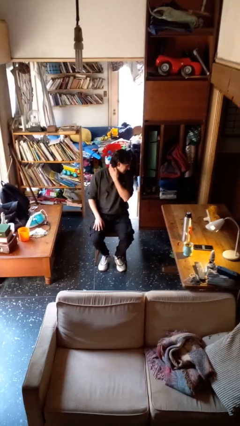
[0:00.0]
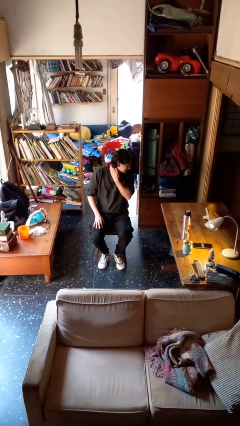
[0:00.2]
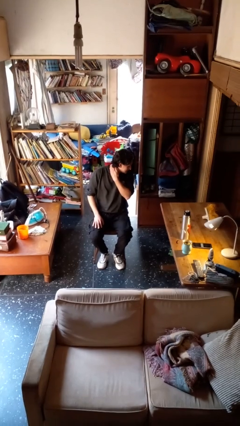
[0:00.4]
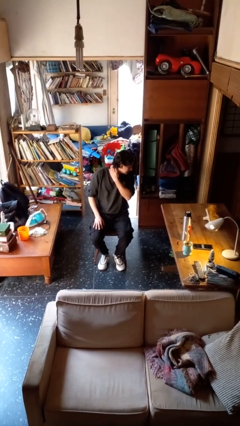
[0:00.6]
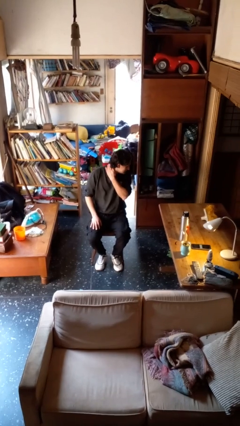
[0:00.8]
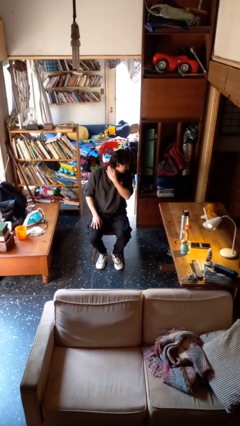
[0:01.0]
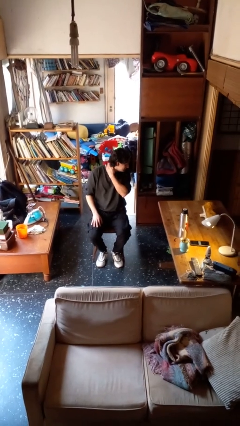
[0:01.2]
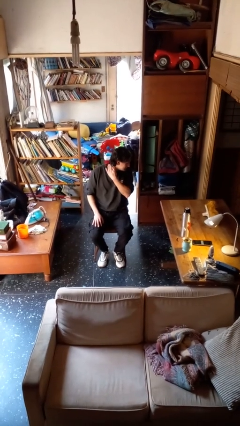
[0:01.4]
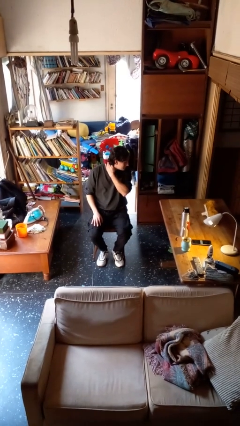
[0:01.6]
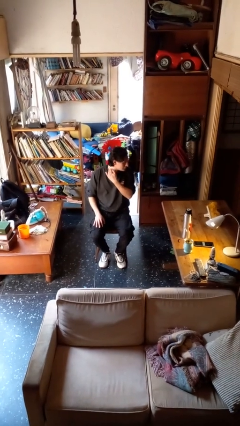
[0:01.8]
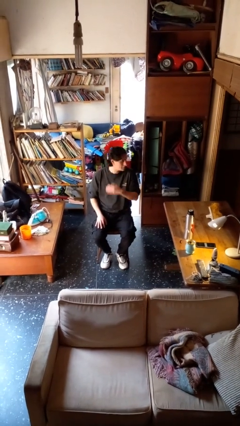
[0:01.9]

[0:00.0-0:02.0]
person swats bug

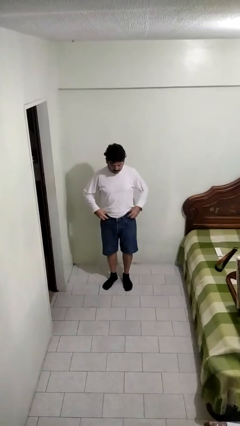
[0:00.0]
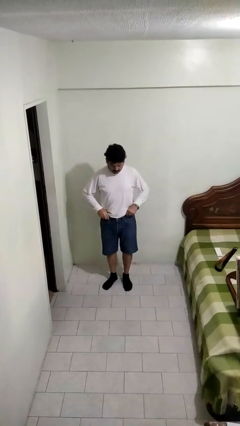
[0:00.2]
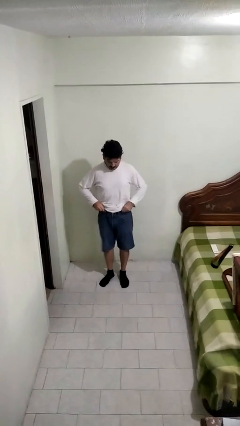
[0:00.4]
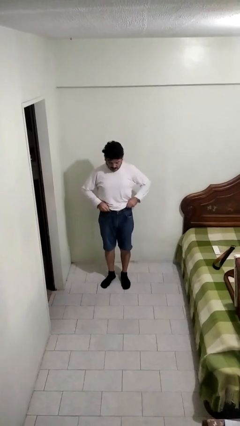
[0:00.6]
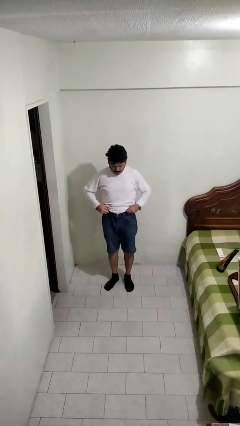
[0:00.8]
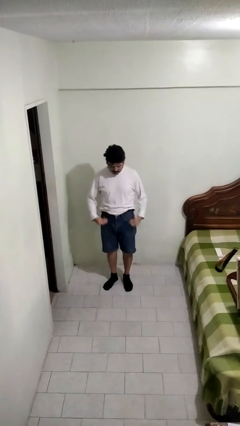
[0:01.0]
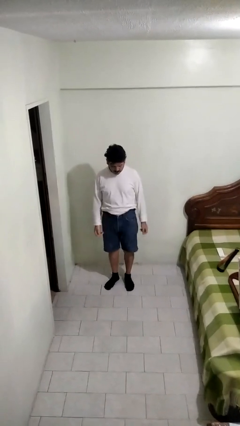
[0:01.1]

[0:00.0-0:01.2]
person hikes up pants

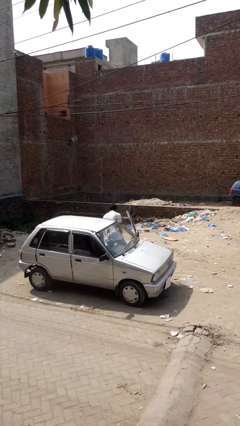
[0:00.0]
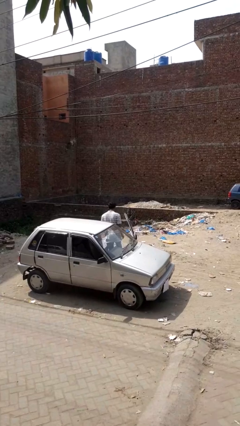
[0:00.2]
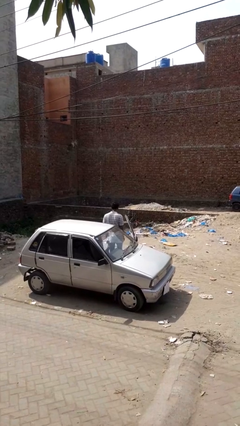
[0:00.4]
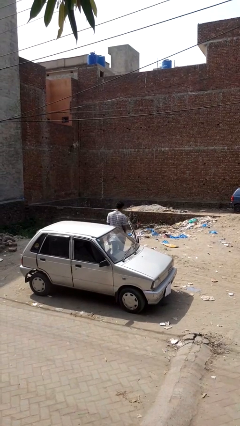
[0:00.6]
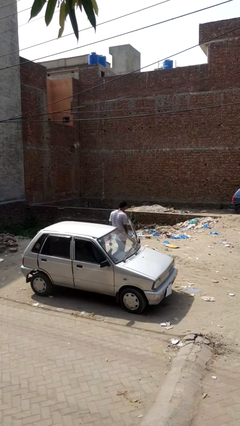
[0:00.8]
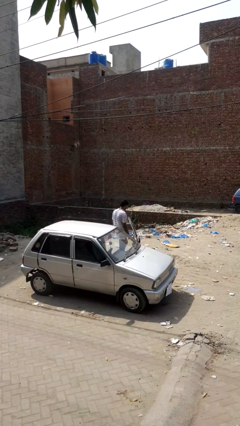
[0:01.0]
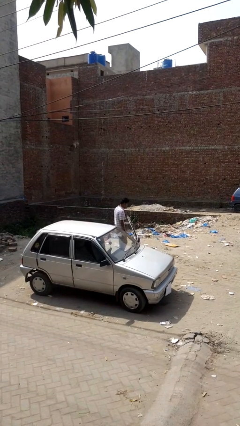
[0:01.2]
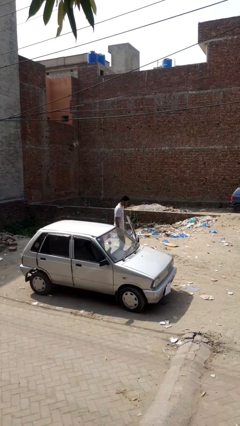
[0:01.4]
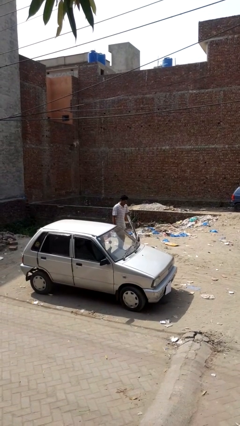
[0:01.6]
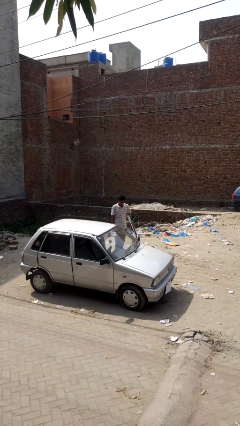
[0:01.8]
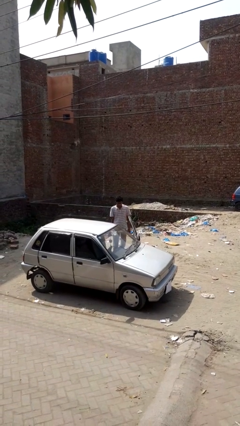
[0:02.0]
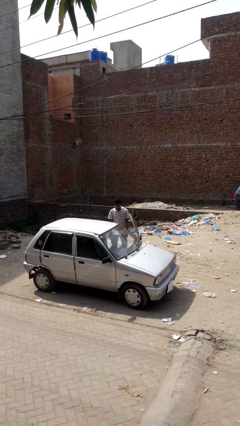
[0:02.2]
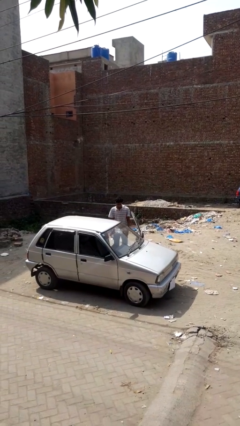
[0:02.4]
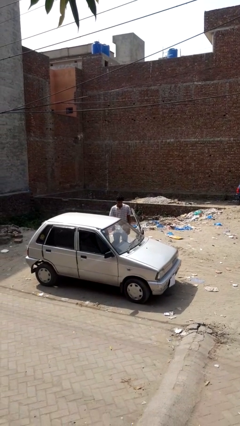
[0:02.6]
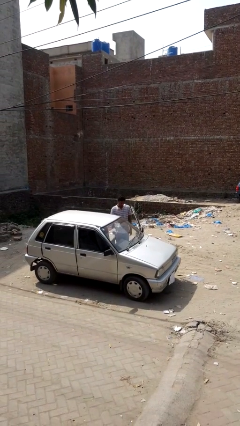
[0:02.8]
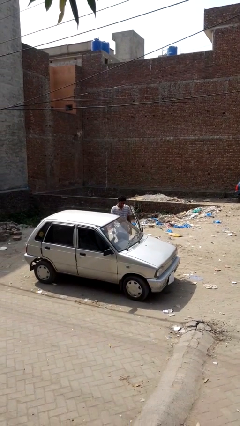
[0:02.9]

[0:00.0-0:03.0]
person exits car

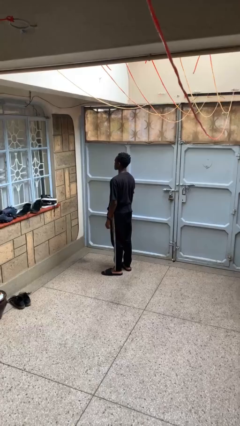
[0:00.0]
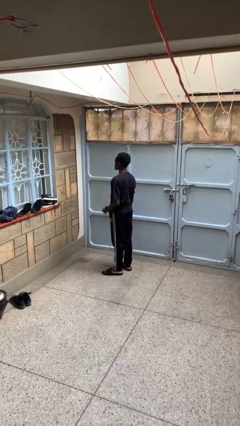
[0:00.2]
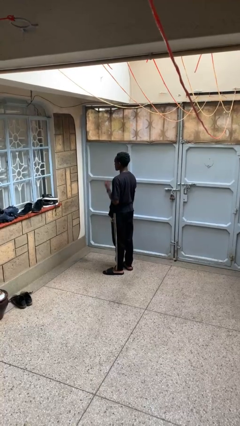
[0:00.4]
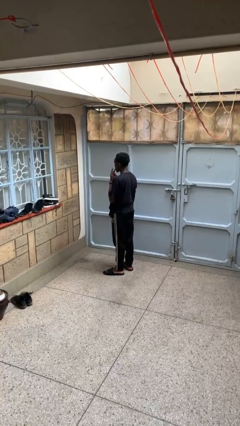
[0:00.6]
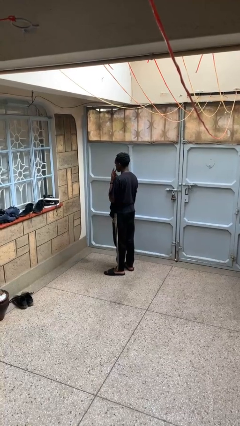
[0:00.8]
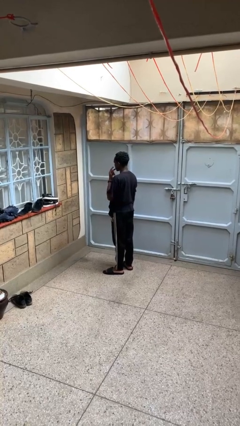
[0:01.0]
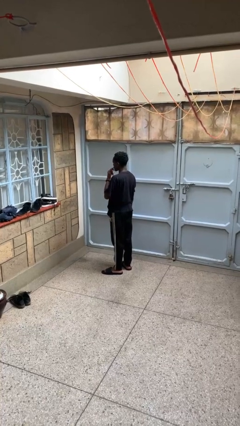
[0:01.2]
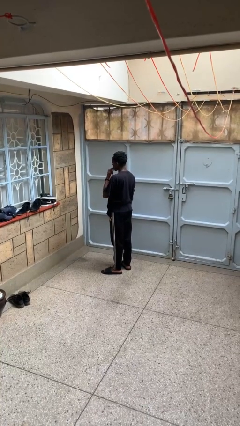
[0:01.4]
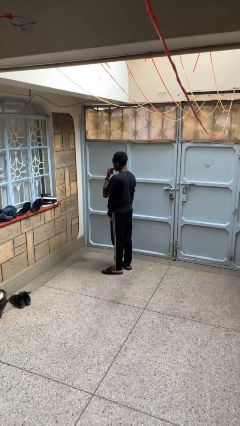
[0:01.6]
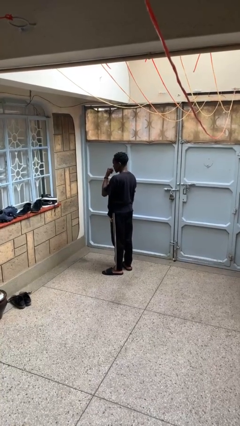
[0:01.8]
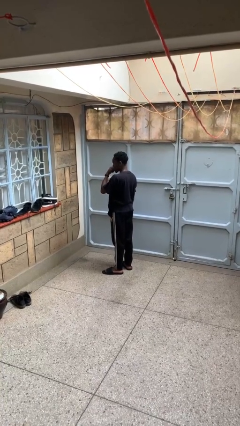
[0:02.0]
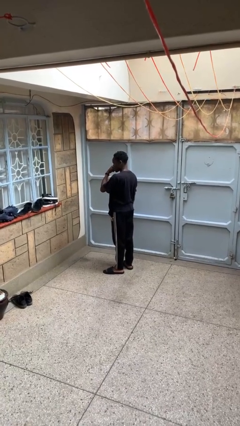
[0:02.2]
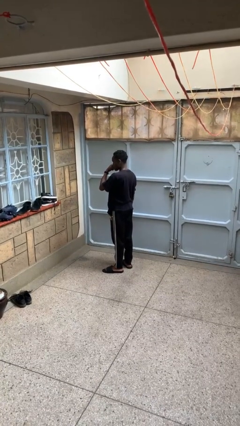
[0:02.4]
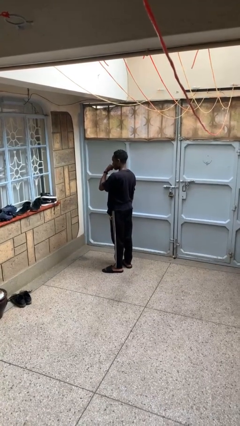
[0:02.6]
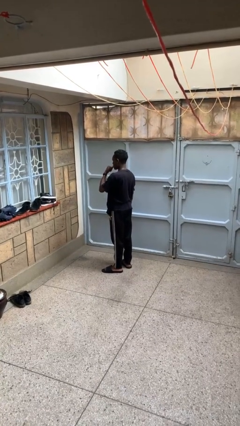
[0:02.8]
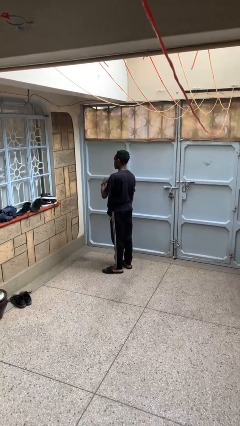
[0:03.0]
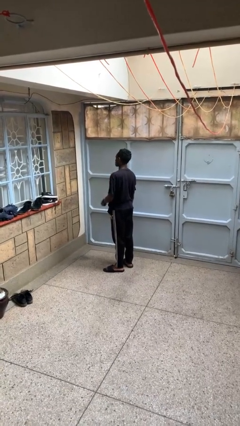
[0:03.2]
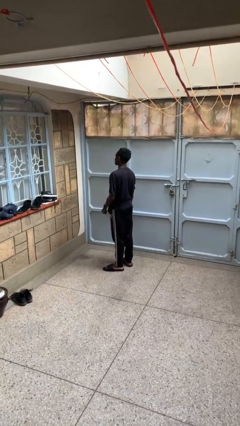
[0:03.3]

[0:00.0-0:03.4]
person licks fingers

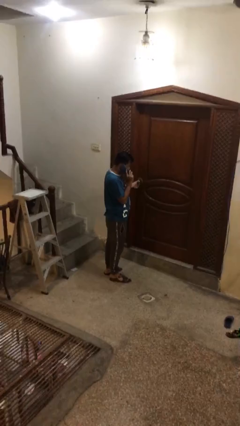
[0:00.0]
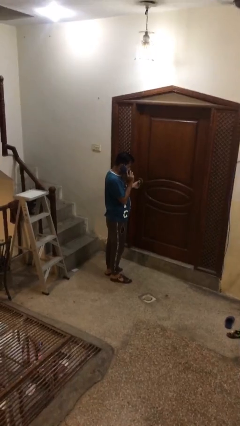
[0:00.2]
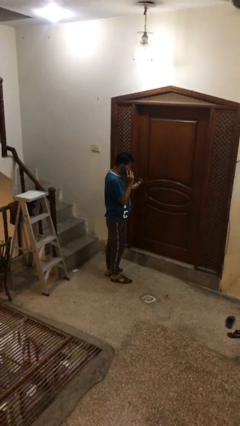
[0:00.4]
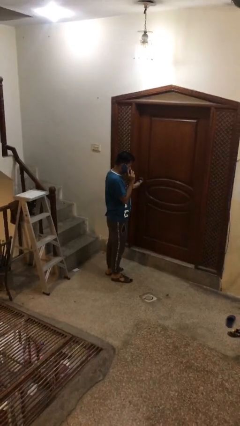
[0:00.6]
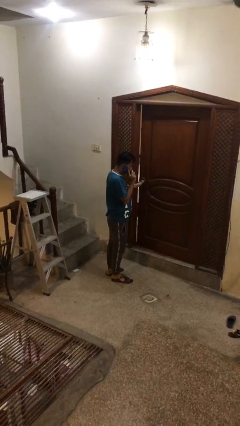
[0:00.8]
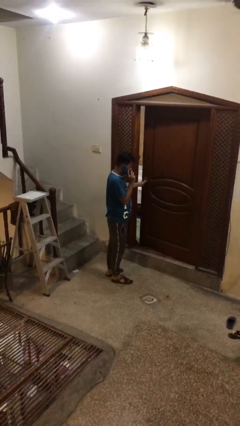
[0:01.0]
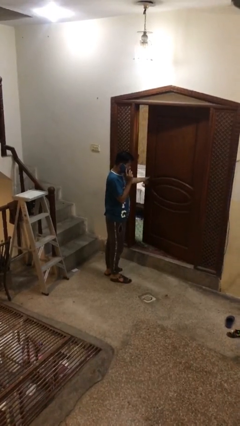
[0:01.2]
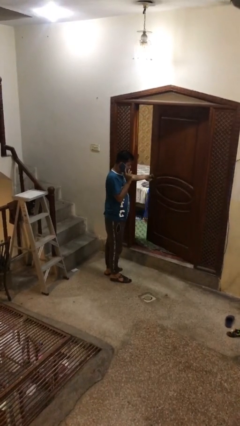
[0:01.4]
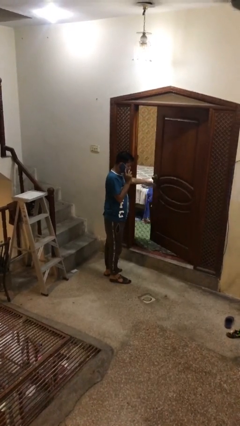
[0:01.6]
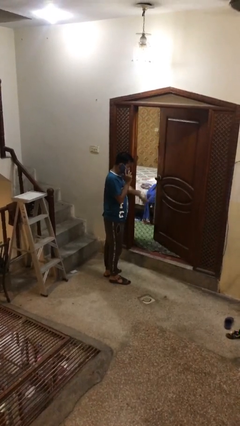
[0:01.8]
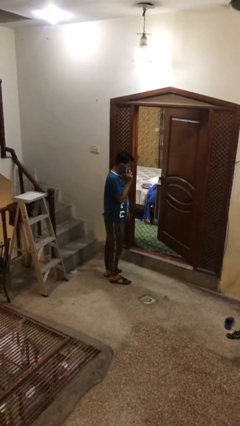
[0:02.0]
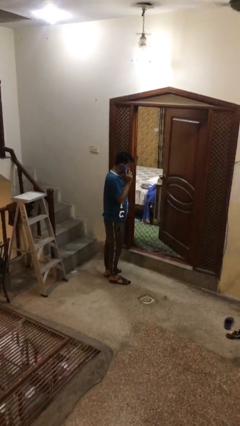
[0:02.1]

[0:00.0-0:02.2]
person opens facility door

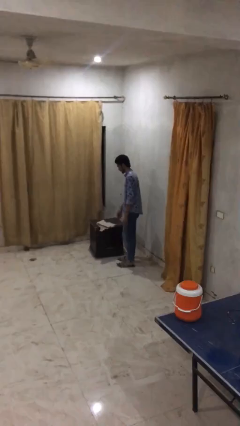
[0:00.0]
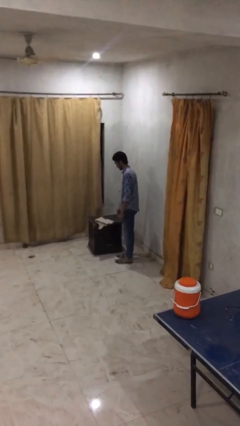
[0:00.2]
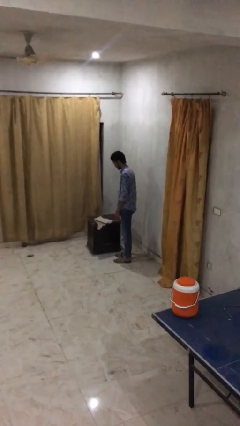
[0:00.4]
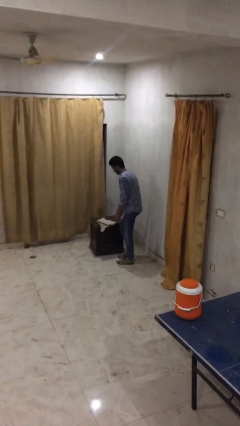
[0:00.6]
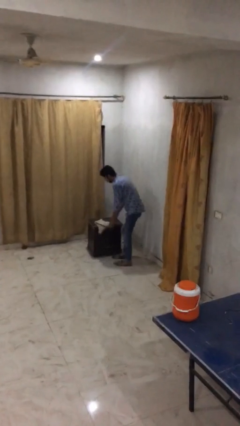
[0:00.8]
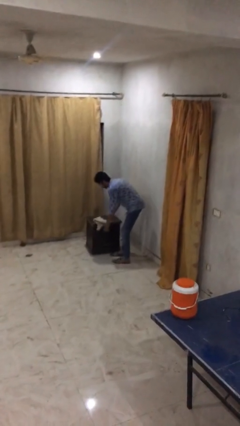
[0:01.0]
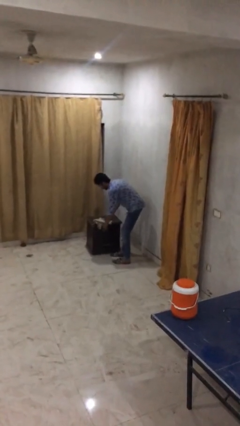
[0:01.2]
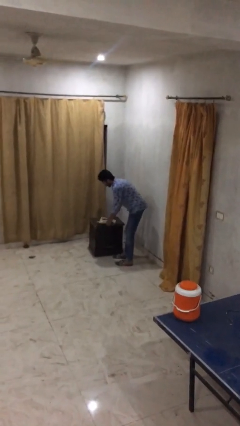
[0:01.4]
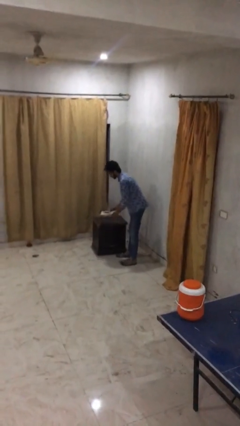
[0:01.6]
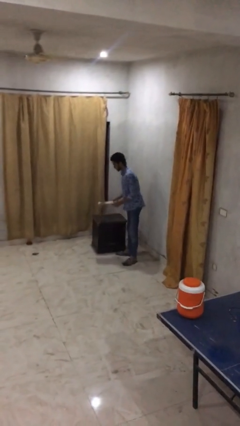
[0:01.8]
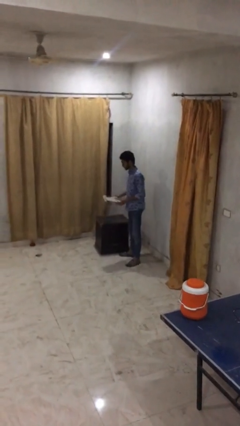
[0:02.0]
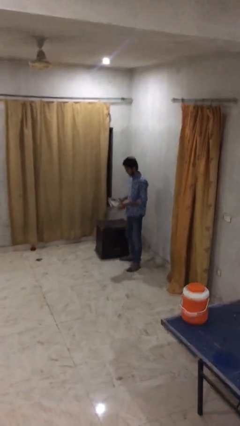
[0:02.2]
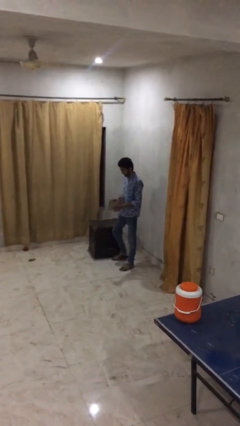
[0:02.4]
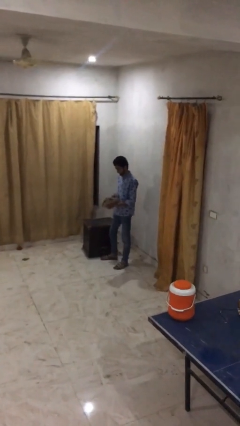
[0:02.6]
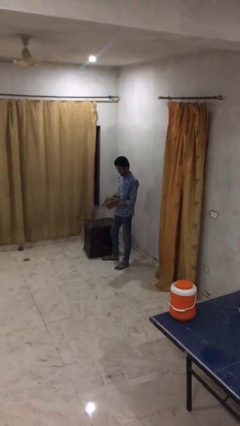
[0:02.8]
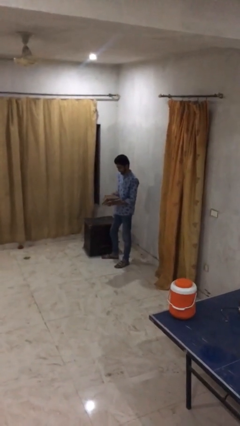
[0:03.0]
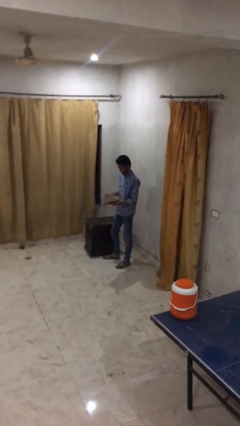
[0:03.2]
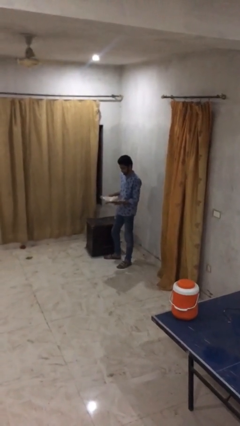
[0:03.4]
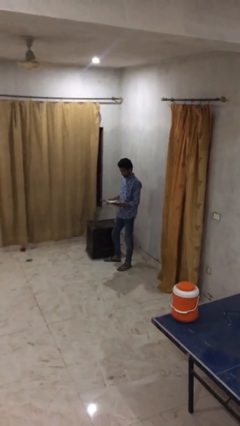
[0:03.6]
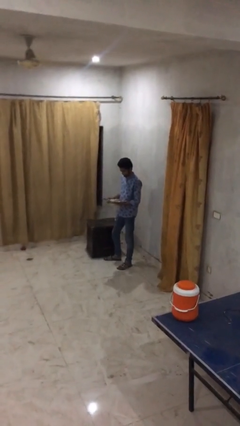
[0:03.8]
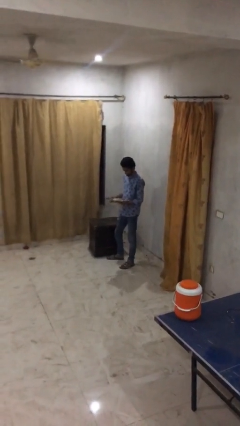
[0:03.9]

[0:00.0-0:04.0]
person picks up object from table

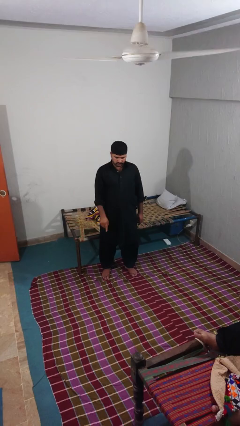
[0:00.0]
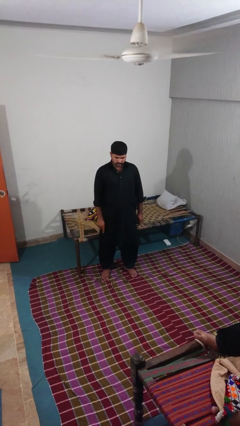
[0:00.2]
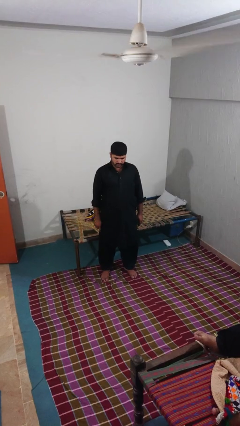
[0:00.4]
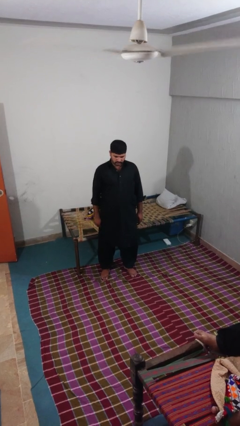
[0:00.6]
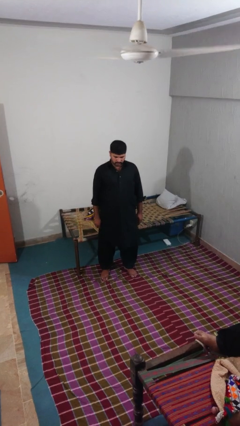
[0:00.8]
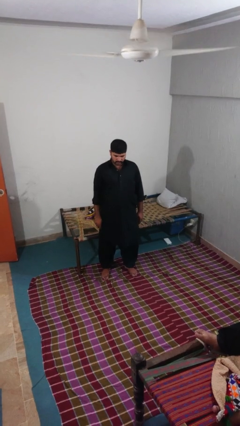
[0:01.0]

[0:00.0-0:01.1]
person gestures swipe down
